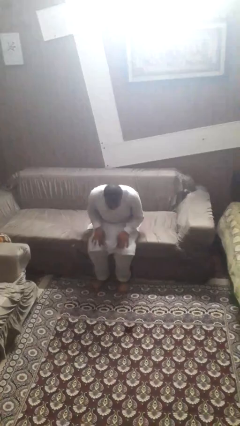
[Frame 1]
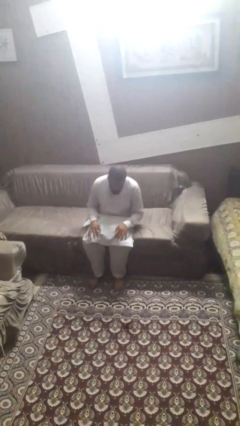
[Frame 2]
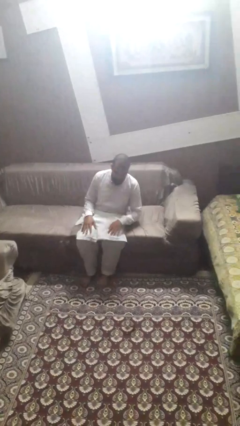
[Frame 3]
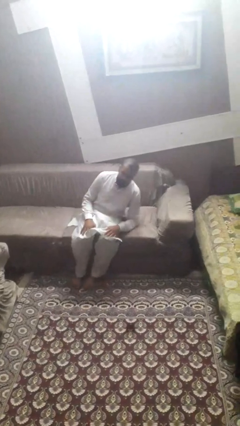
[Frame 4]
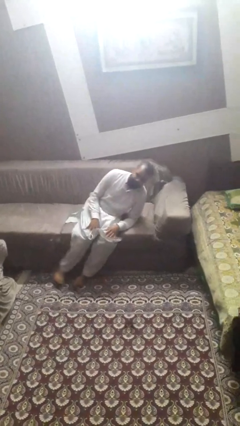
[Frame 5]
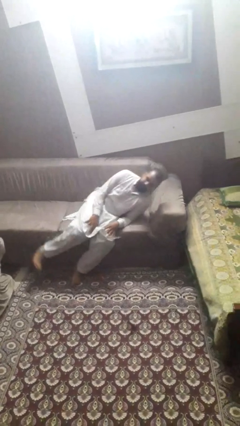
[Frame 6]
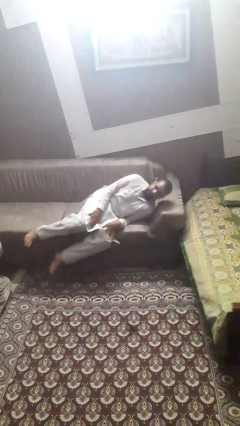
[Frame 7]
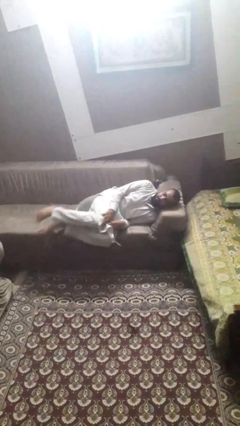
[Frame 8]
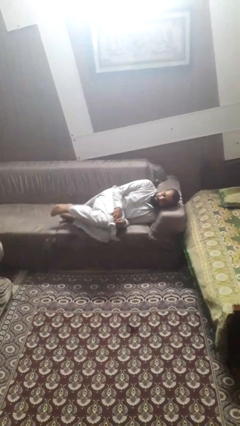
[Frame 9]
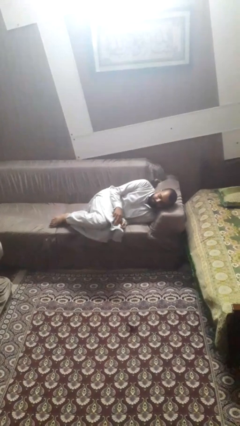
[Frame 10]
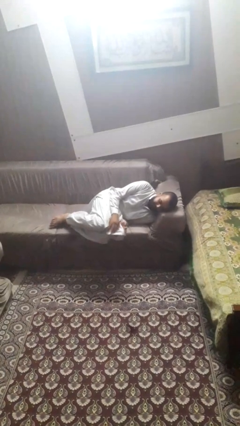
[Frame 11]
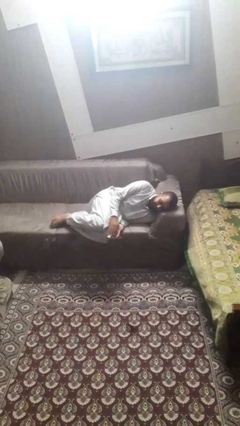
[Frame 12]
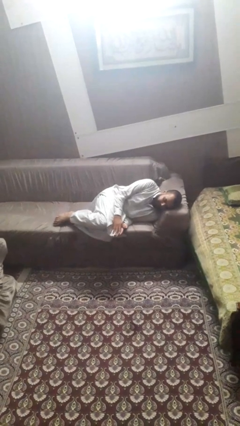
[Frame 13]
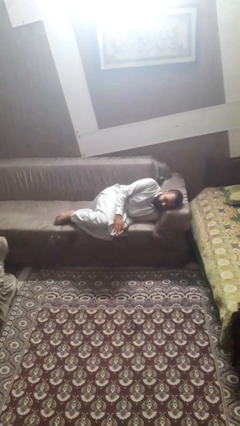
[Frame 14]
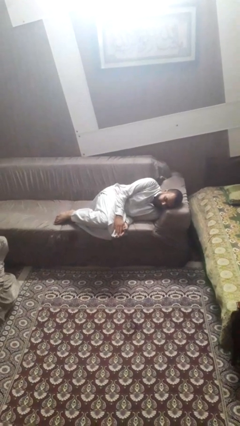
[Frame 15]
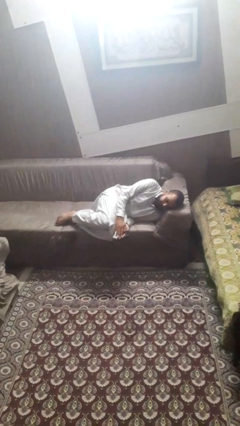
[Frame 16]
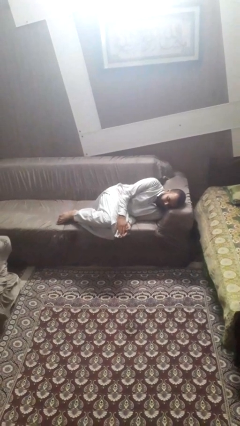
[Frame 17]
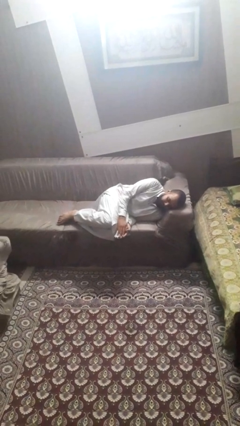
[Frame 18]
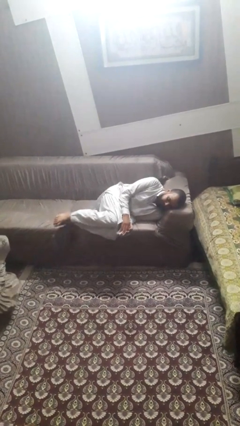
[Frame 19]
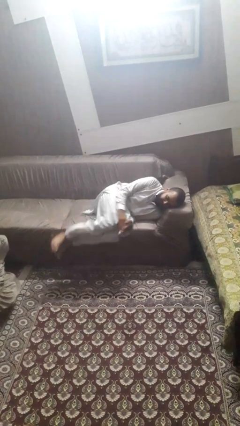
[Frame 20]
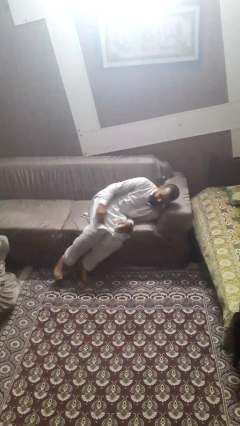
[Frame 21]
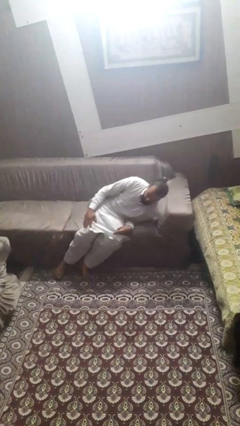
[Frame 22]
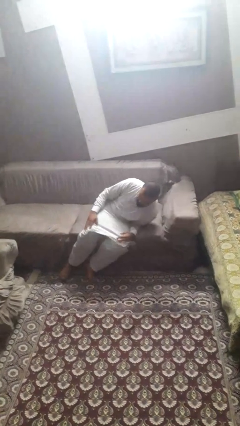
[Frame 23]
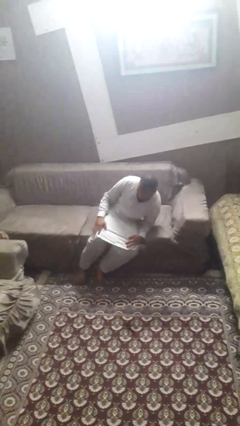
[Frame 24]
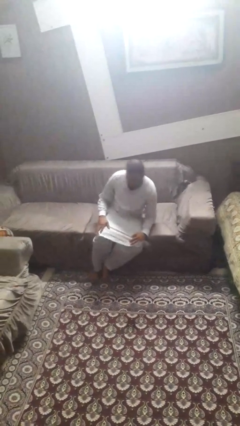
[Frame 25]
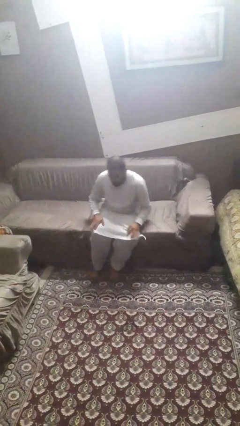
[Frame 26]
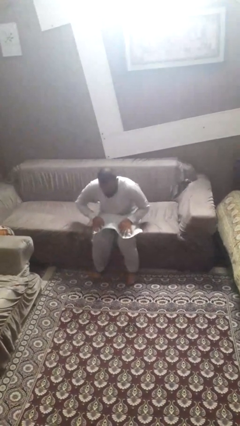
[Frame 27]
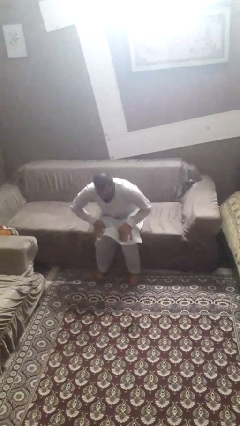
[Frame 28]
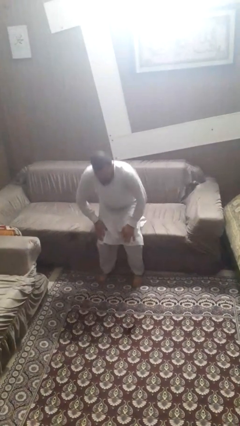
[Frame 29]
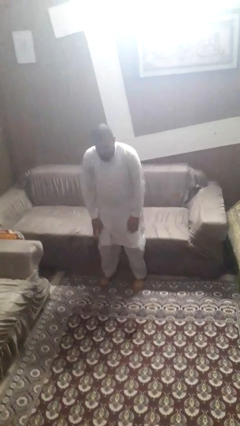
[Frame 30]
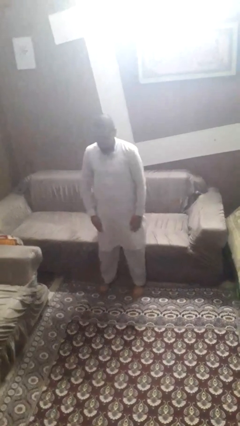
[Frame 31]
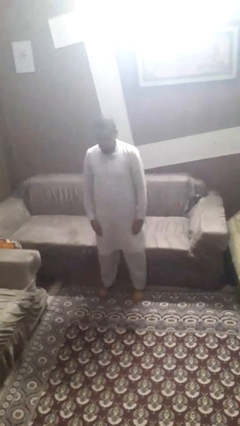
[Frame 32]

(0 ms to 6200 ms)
person lies down on couch

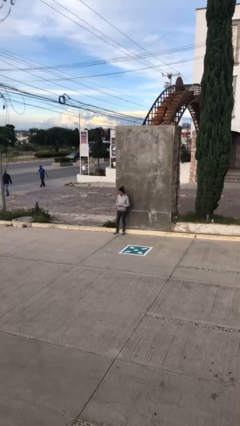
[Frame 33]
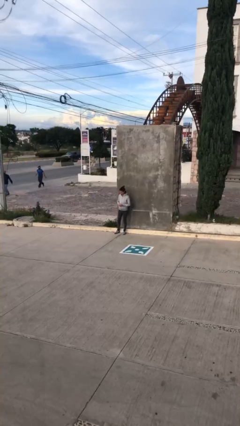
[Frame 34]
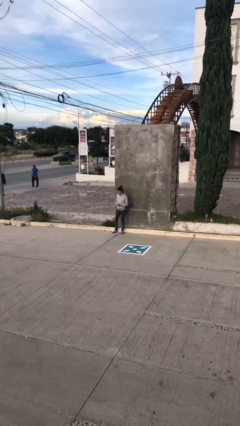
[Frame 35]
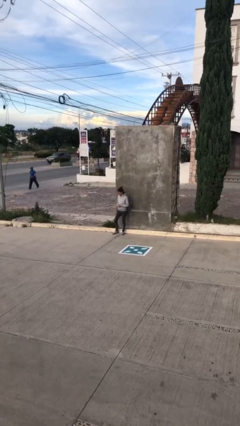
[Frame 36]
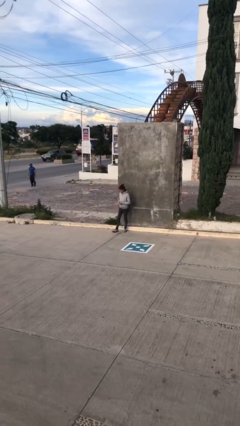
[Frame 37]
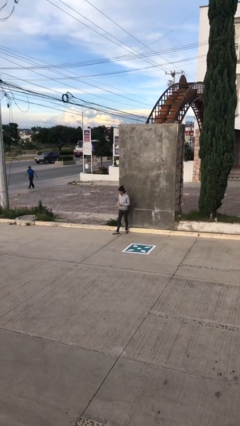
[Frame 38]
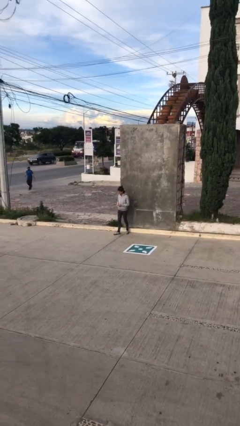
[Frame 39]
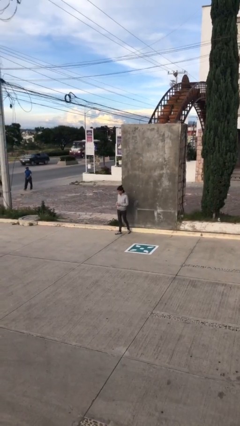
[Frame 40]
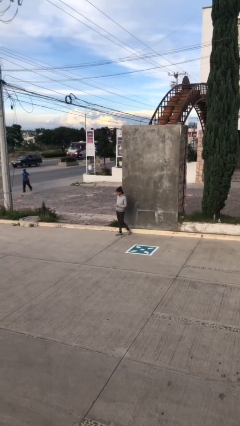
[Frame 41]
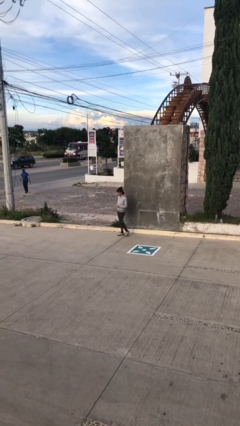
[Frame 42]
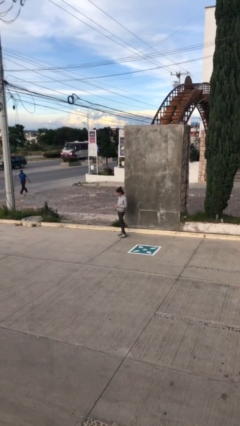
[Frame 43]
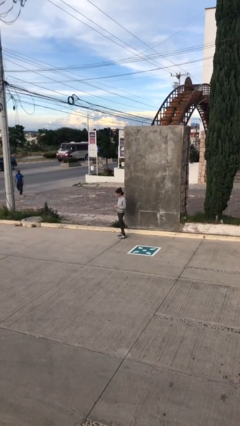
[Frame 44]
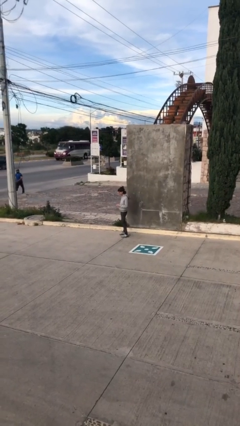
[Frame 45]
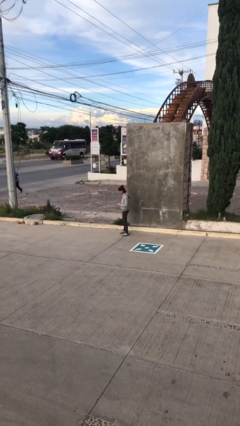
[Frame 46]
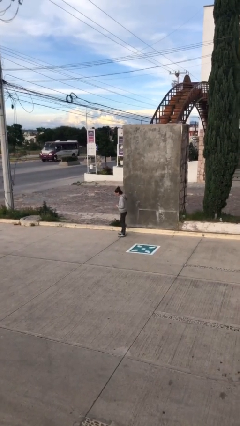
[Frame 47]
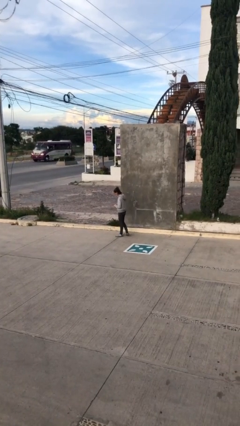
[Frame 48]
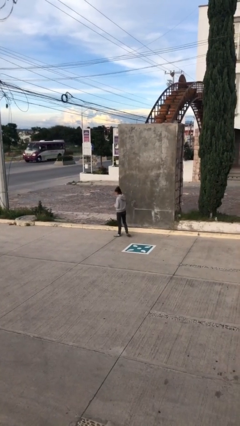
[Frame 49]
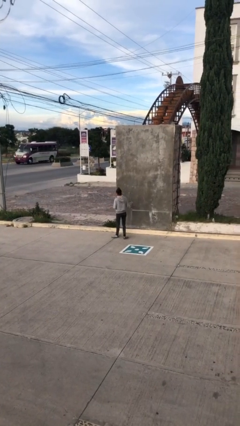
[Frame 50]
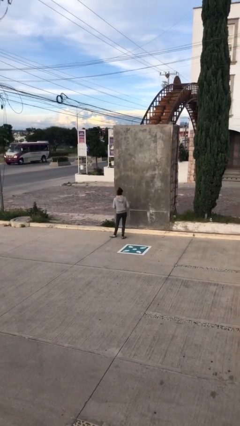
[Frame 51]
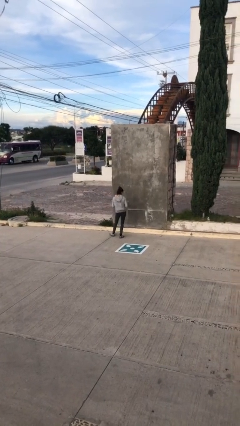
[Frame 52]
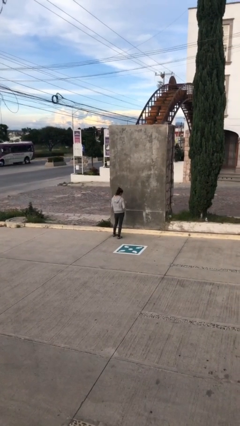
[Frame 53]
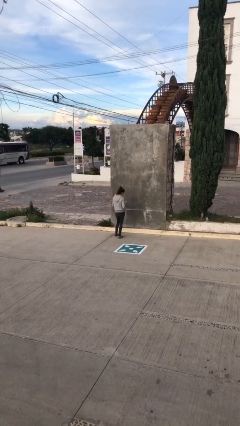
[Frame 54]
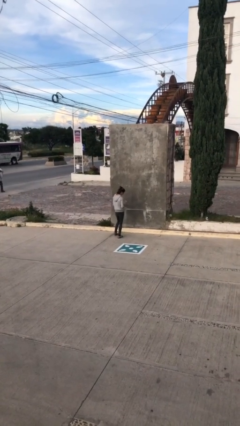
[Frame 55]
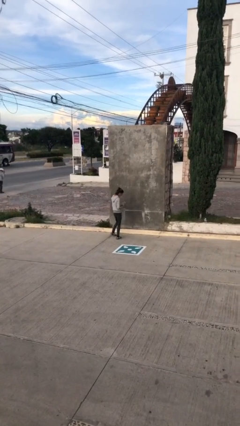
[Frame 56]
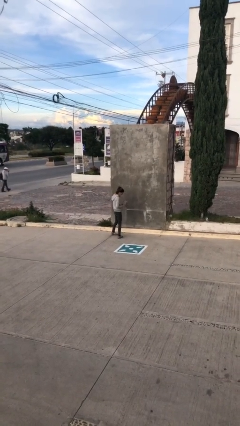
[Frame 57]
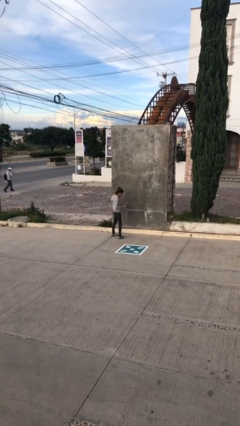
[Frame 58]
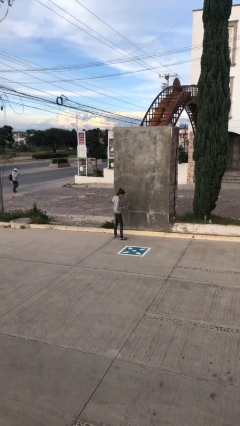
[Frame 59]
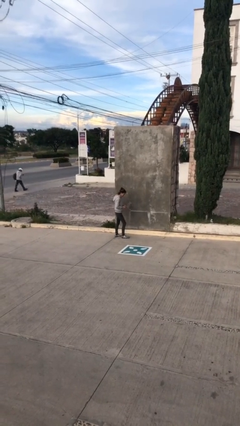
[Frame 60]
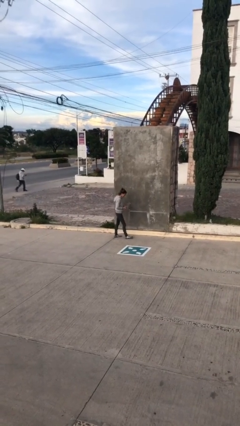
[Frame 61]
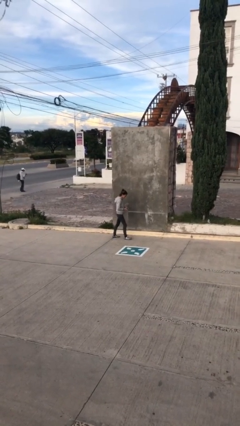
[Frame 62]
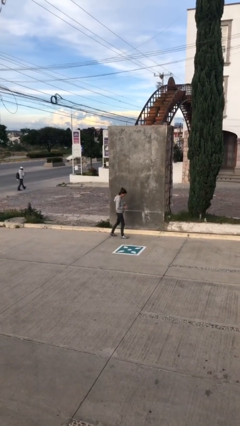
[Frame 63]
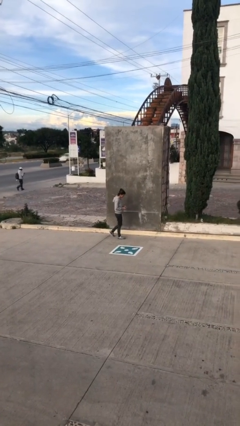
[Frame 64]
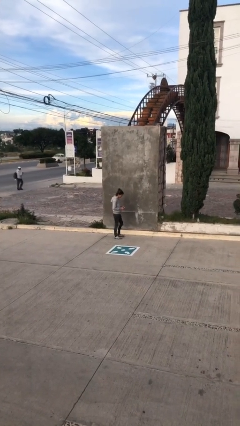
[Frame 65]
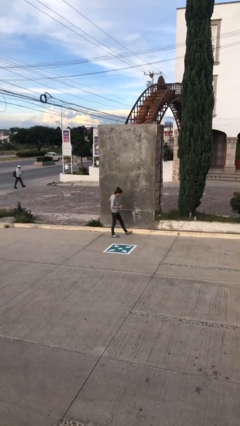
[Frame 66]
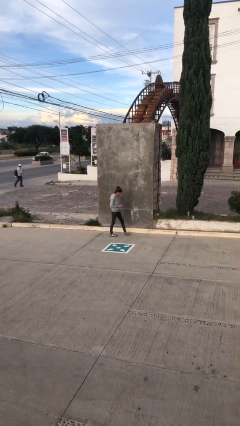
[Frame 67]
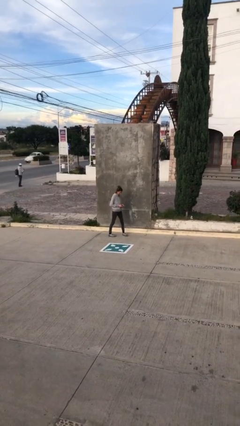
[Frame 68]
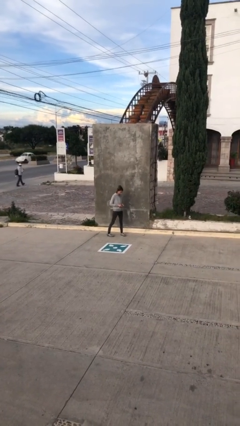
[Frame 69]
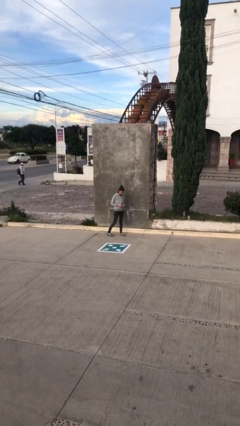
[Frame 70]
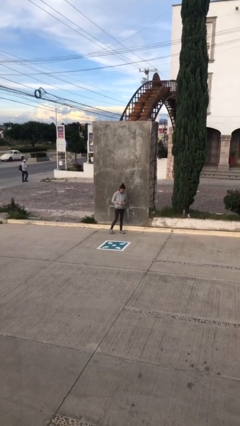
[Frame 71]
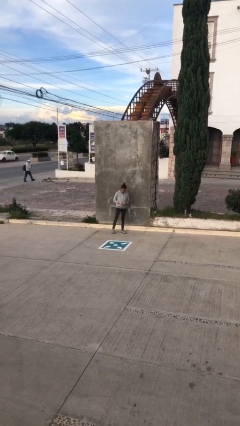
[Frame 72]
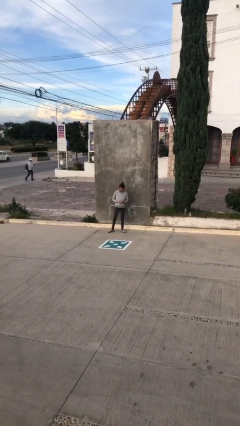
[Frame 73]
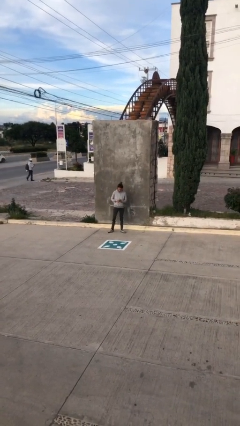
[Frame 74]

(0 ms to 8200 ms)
person texts on phone

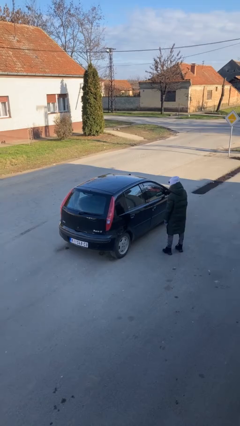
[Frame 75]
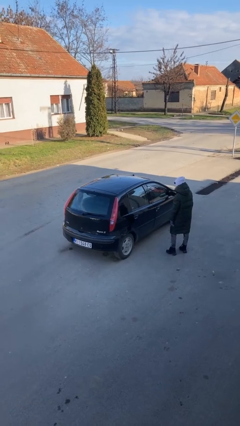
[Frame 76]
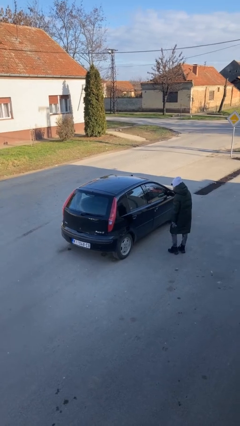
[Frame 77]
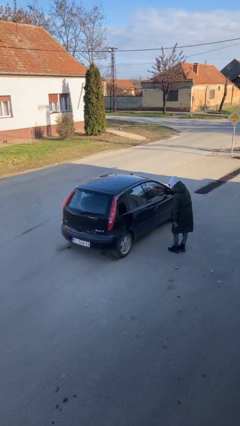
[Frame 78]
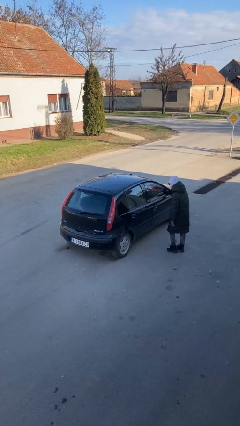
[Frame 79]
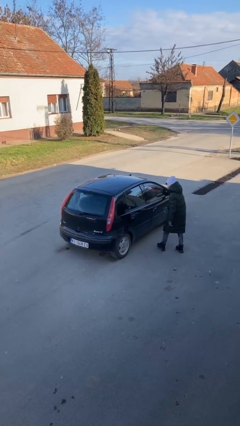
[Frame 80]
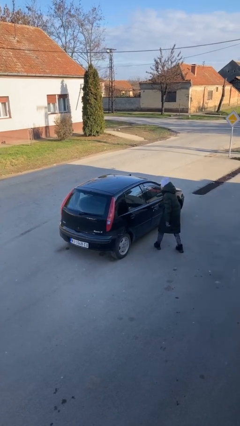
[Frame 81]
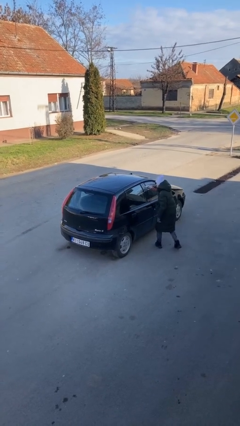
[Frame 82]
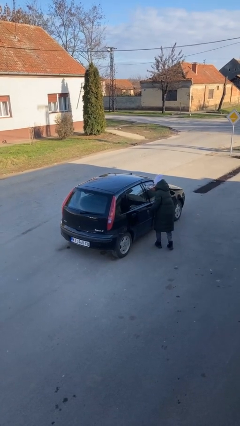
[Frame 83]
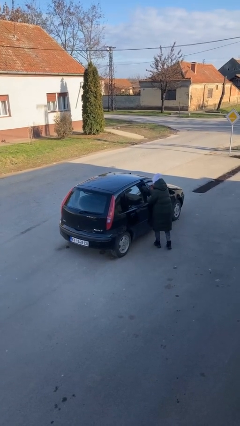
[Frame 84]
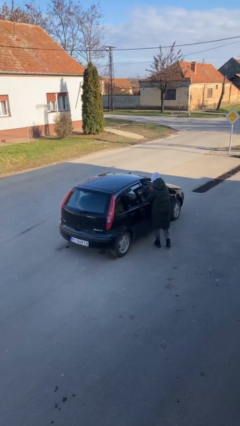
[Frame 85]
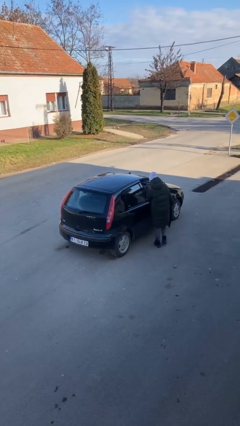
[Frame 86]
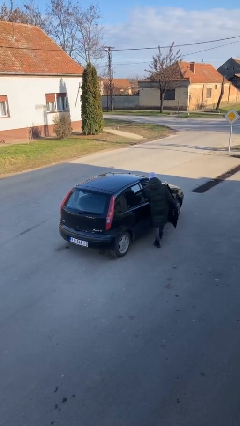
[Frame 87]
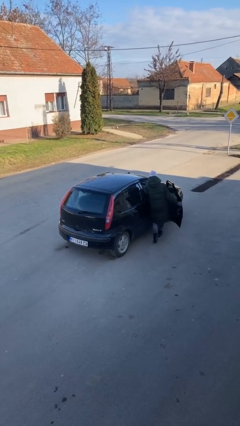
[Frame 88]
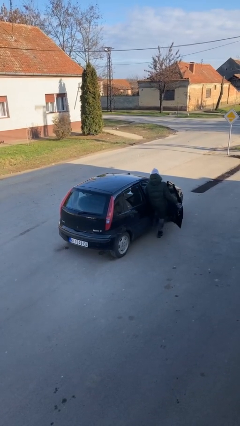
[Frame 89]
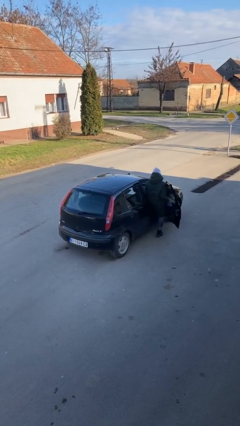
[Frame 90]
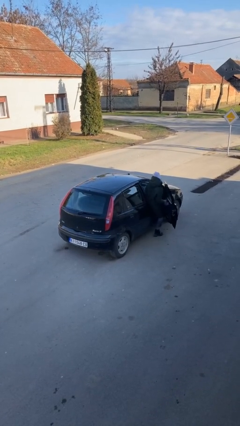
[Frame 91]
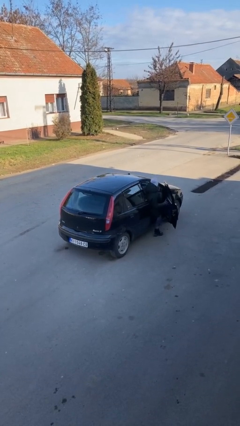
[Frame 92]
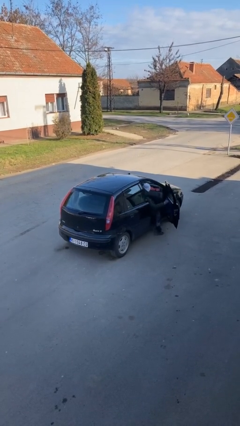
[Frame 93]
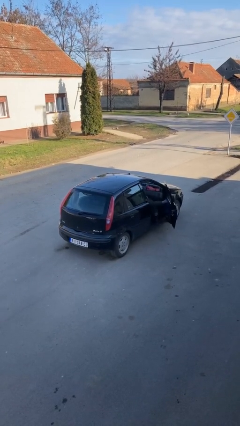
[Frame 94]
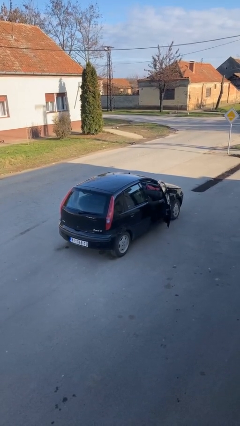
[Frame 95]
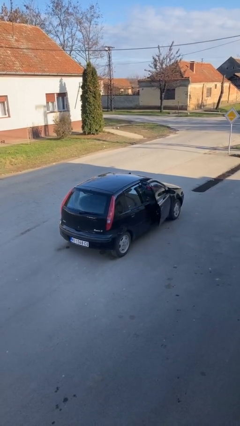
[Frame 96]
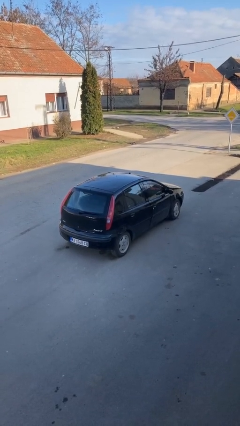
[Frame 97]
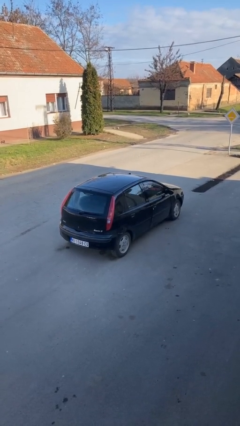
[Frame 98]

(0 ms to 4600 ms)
car picks up person
